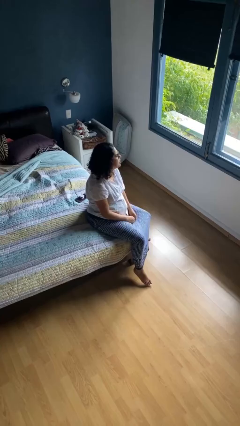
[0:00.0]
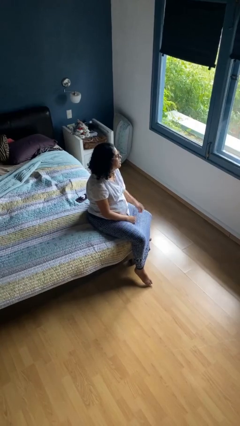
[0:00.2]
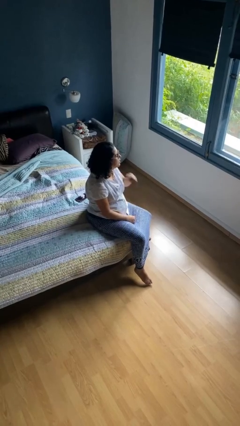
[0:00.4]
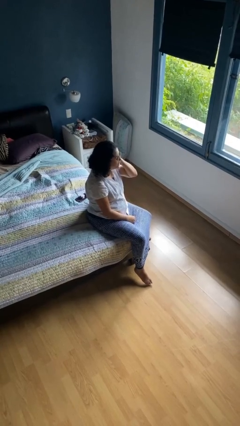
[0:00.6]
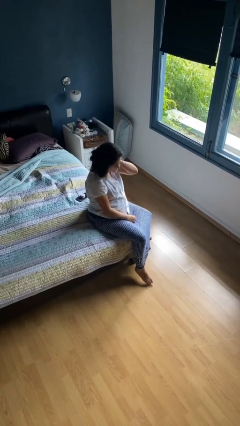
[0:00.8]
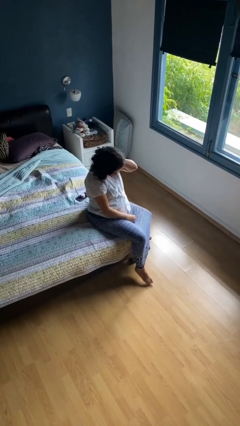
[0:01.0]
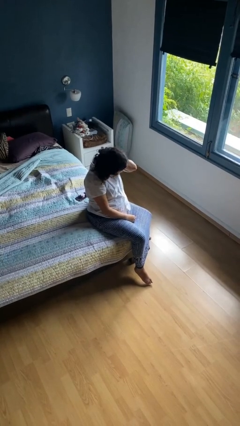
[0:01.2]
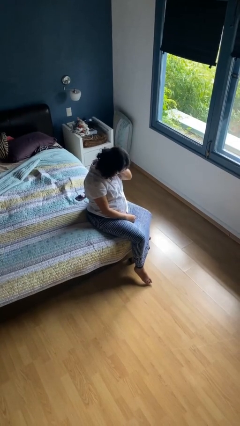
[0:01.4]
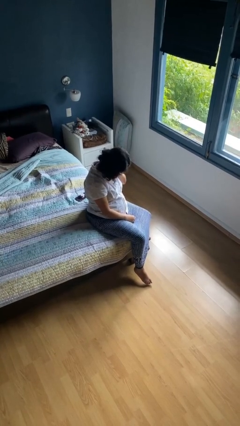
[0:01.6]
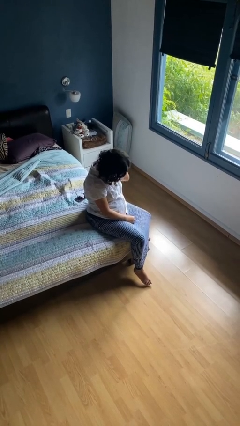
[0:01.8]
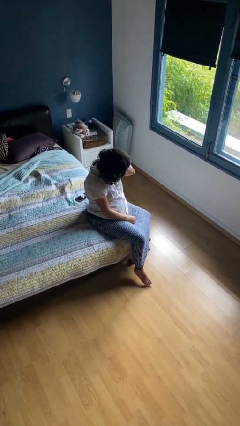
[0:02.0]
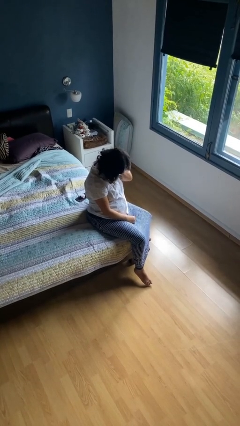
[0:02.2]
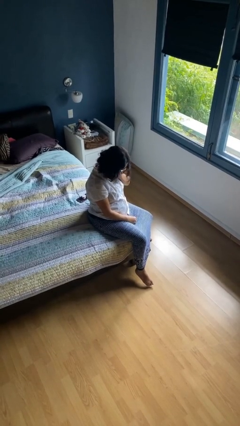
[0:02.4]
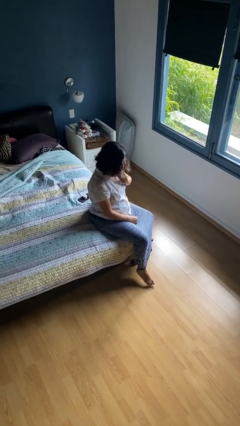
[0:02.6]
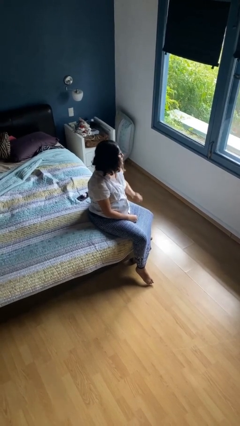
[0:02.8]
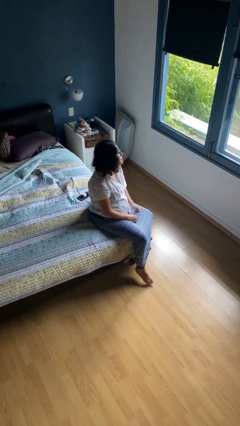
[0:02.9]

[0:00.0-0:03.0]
person rubs neck

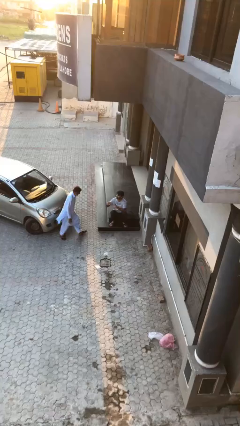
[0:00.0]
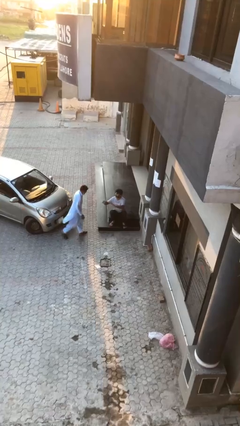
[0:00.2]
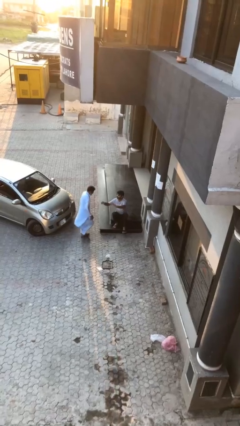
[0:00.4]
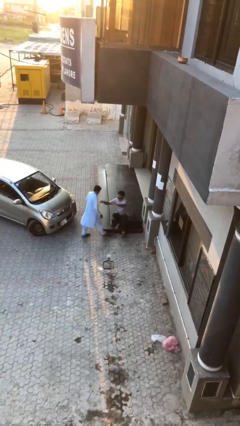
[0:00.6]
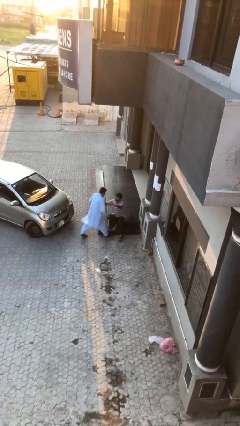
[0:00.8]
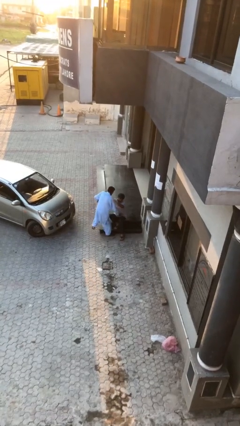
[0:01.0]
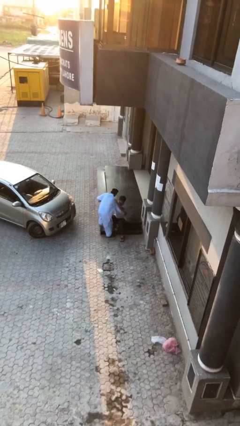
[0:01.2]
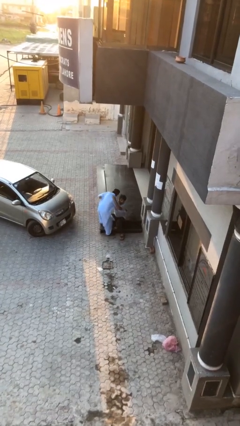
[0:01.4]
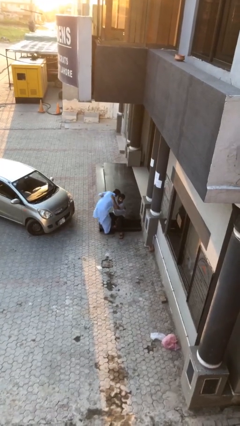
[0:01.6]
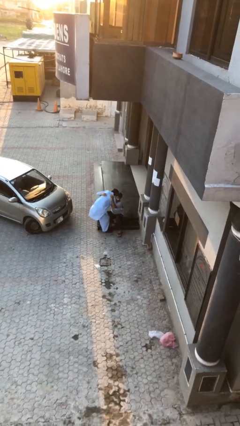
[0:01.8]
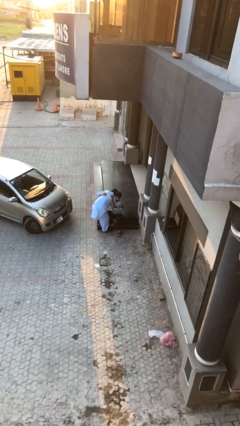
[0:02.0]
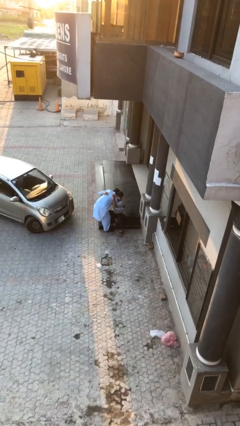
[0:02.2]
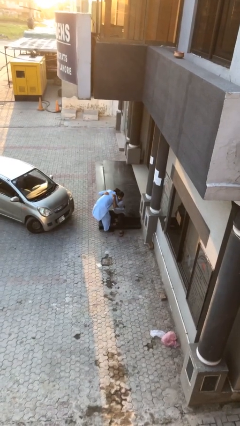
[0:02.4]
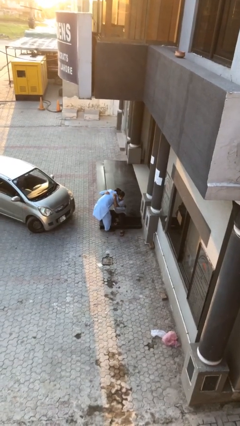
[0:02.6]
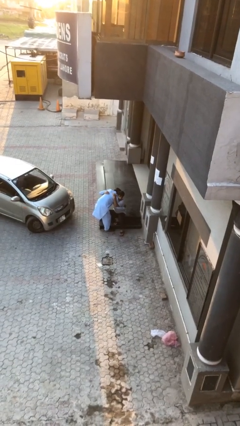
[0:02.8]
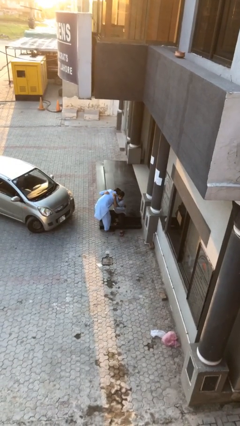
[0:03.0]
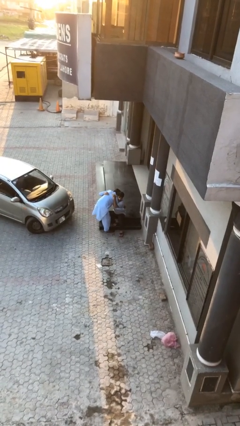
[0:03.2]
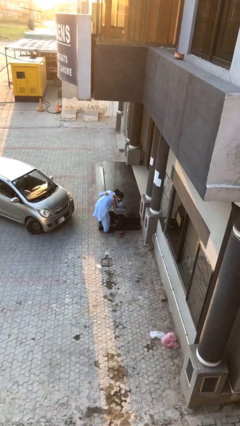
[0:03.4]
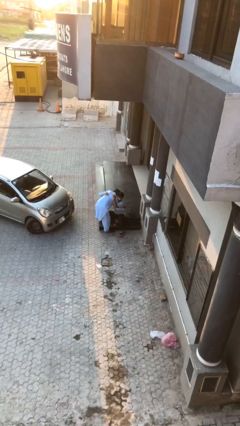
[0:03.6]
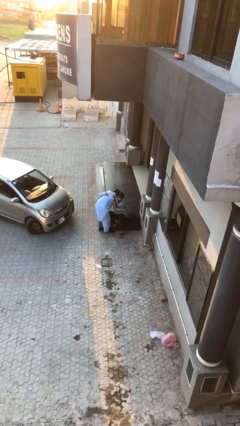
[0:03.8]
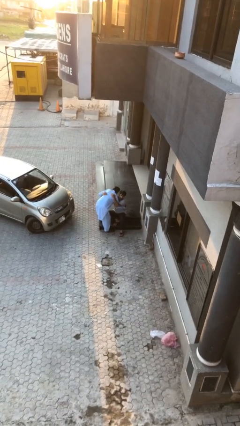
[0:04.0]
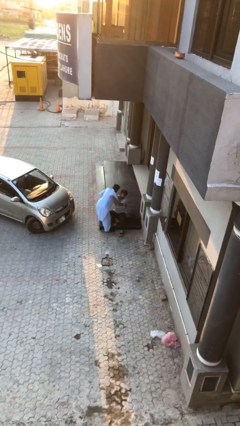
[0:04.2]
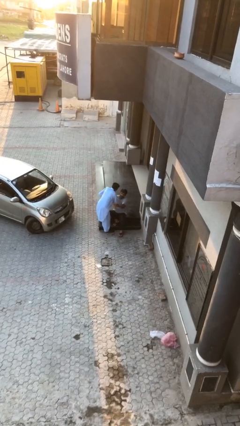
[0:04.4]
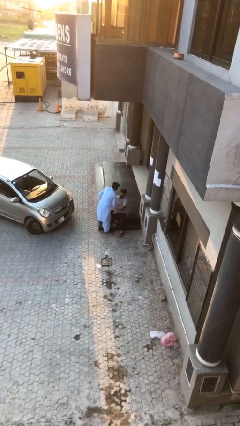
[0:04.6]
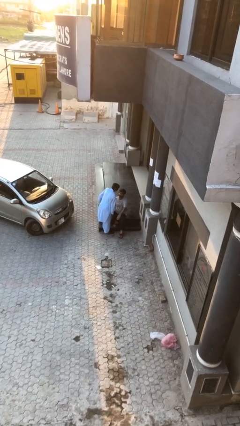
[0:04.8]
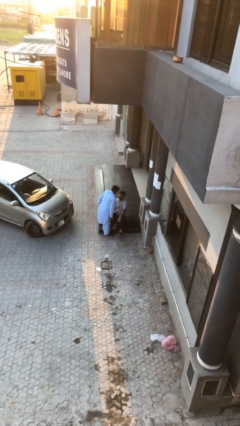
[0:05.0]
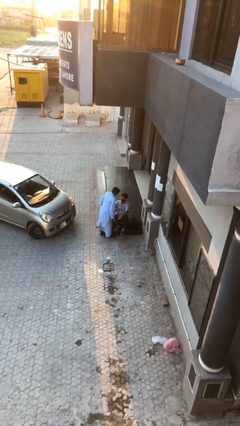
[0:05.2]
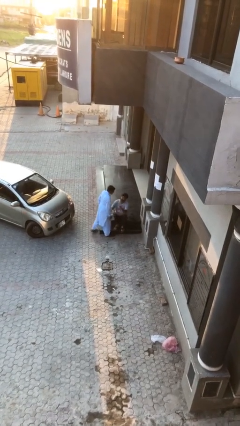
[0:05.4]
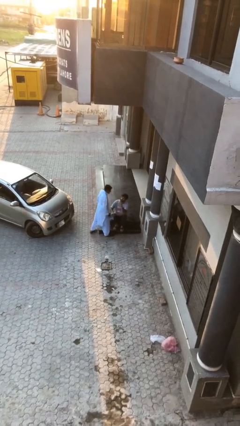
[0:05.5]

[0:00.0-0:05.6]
person embraces person

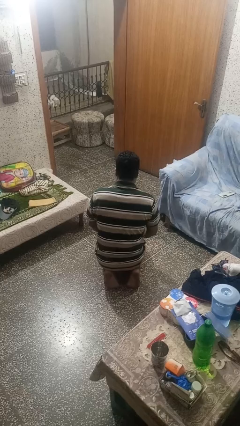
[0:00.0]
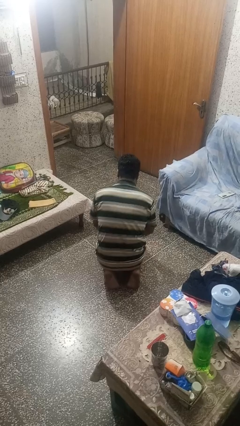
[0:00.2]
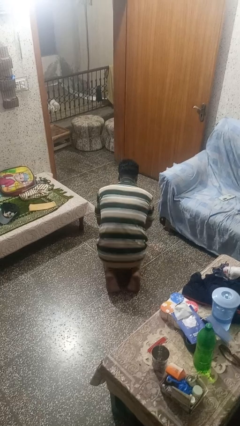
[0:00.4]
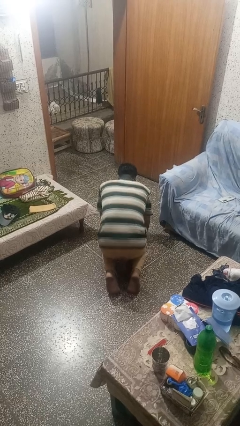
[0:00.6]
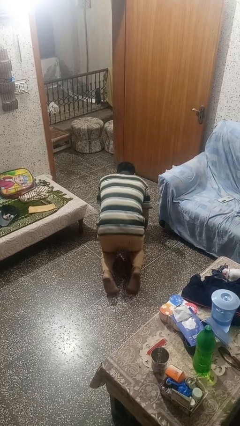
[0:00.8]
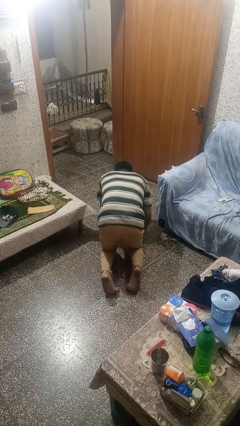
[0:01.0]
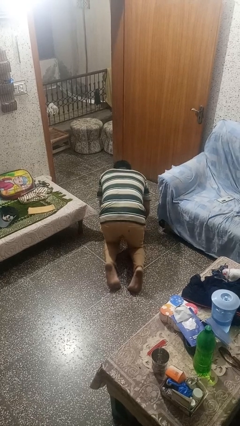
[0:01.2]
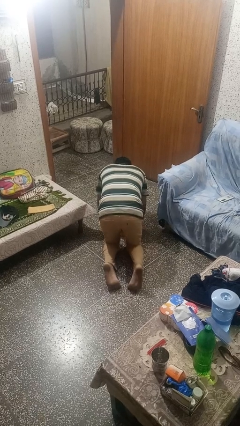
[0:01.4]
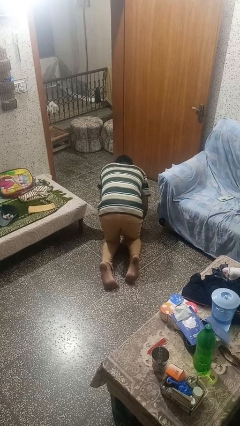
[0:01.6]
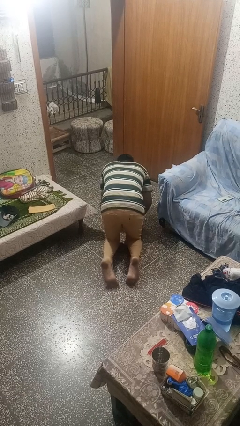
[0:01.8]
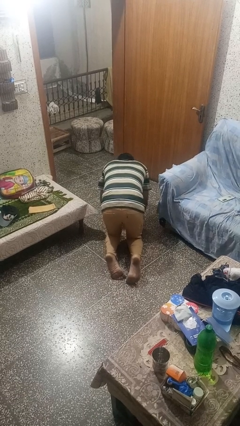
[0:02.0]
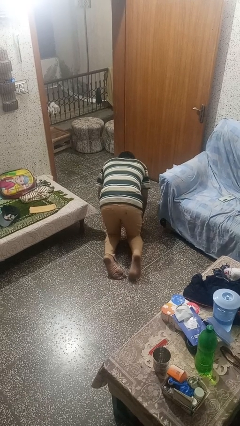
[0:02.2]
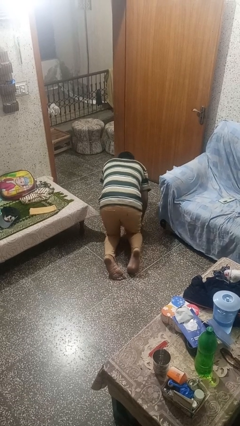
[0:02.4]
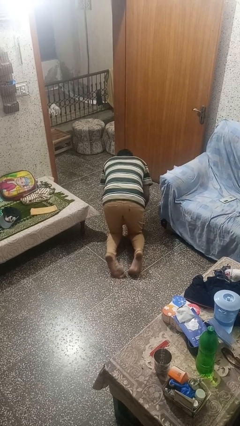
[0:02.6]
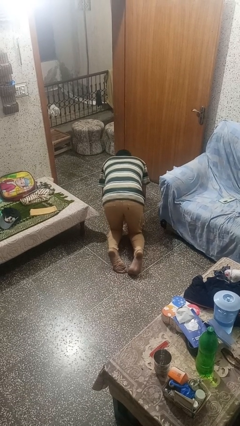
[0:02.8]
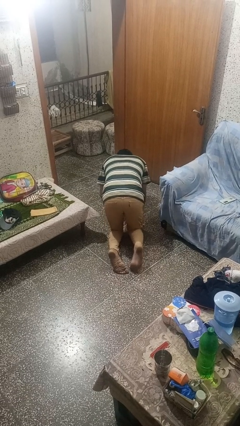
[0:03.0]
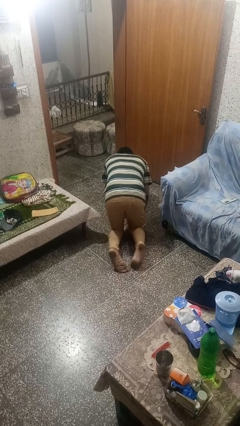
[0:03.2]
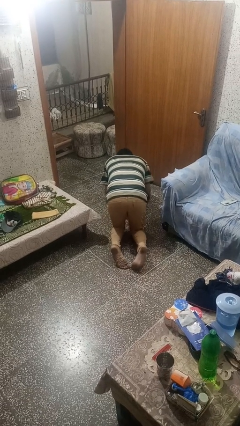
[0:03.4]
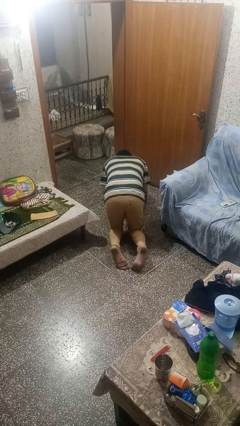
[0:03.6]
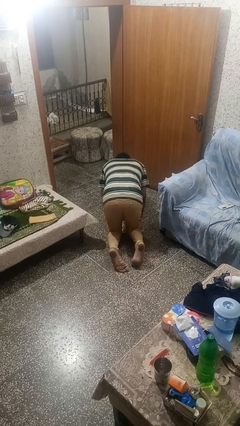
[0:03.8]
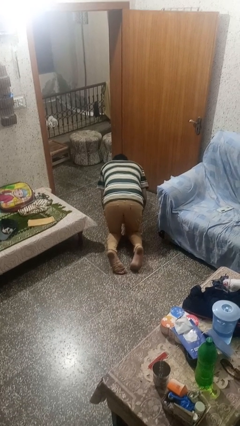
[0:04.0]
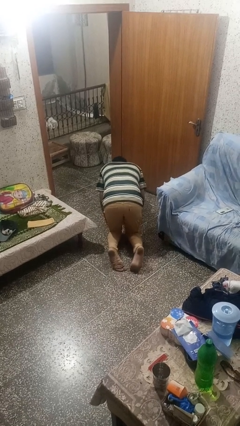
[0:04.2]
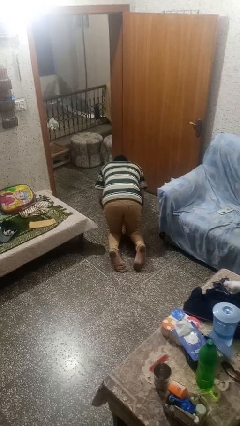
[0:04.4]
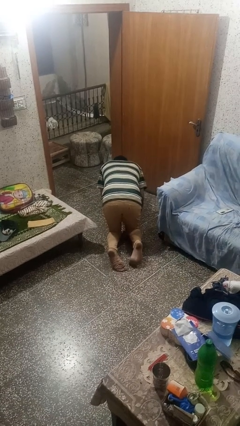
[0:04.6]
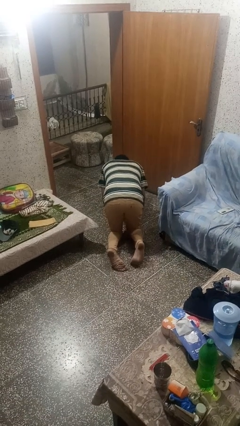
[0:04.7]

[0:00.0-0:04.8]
person crawls

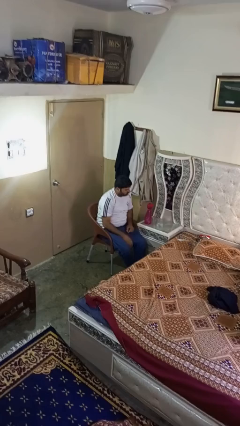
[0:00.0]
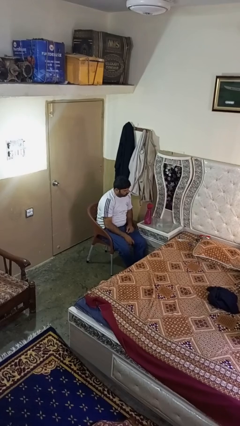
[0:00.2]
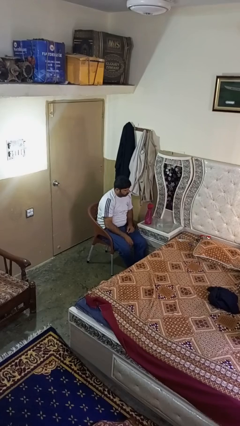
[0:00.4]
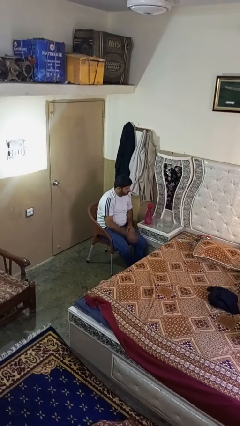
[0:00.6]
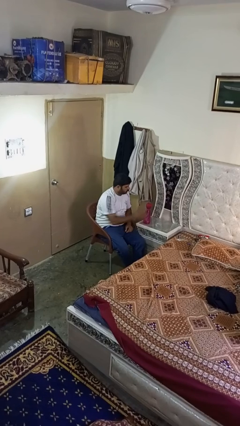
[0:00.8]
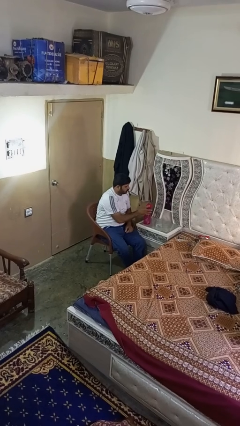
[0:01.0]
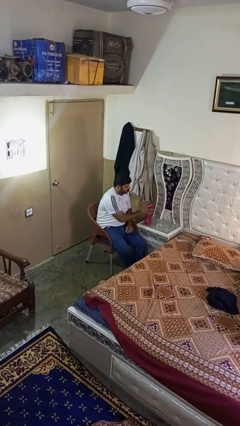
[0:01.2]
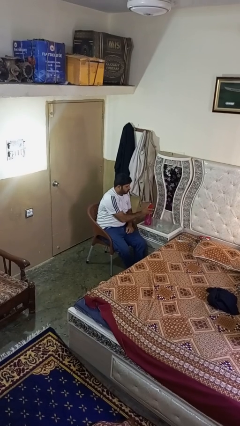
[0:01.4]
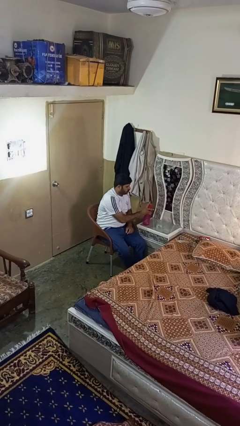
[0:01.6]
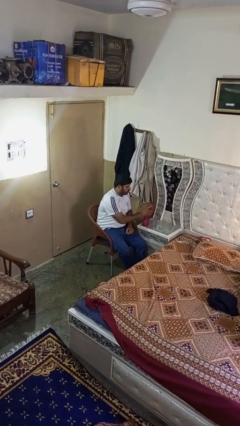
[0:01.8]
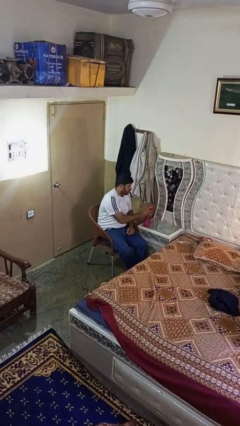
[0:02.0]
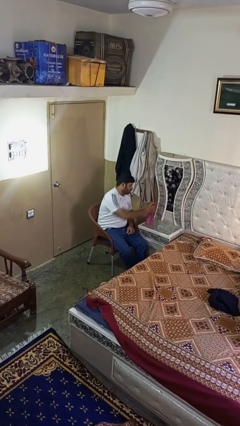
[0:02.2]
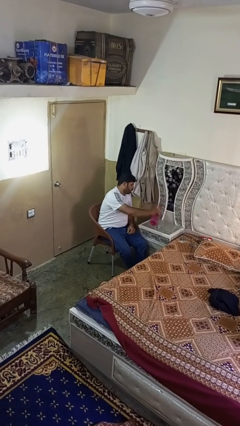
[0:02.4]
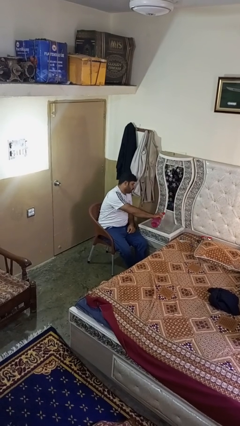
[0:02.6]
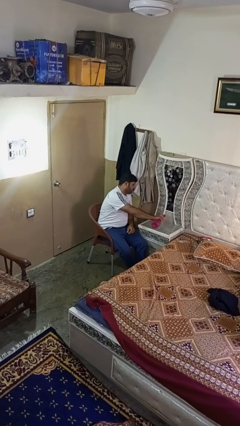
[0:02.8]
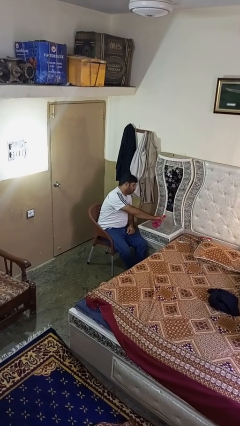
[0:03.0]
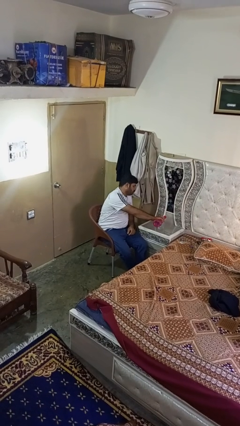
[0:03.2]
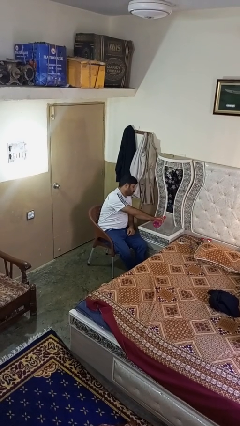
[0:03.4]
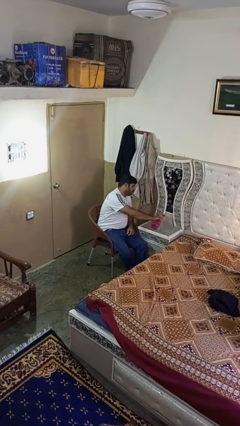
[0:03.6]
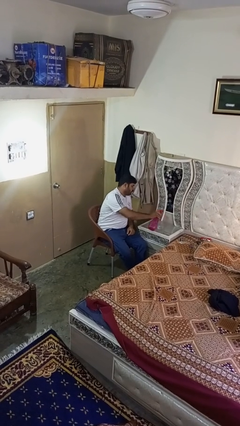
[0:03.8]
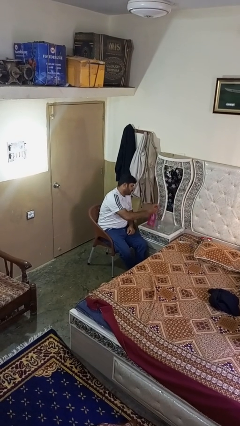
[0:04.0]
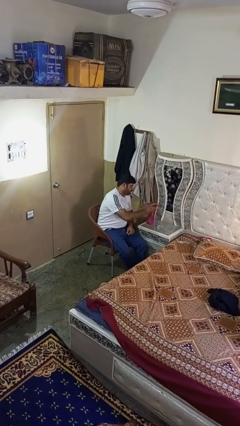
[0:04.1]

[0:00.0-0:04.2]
person pours liquid into cup
